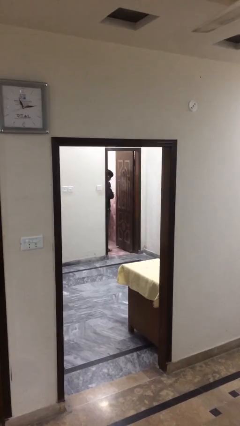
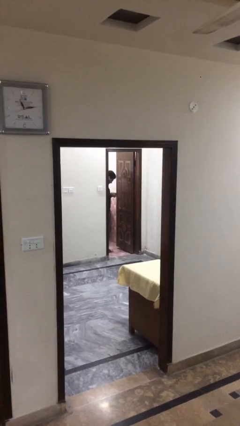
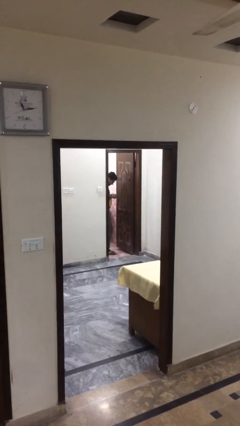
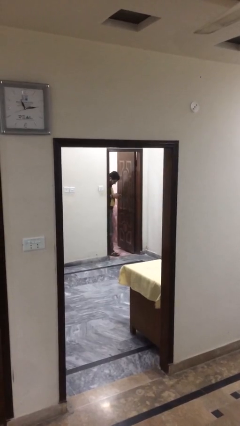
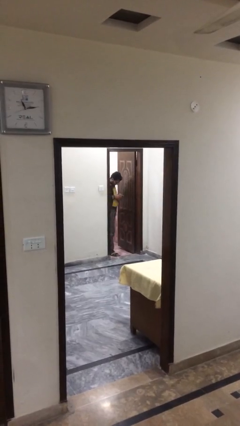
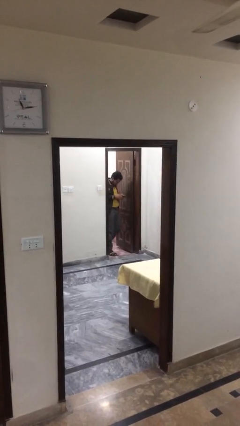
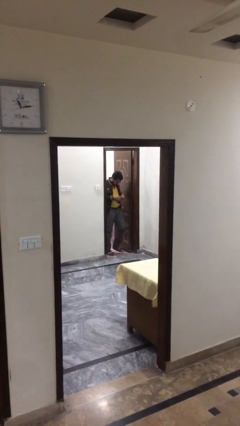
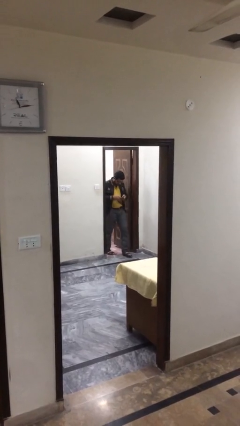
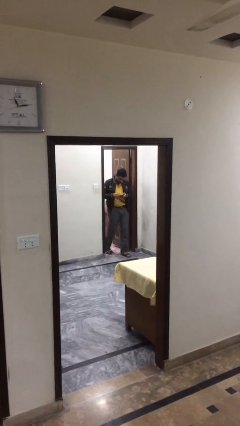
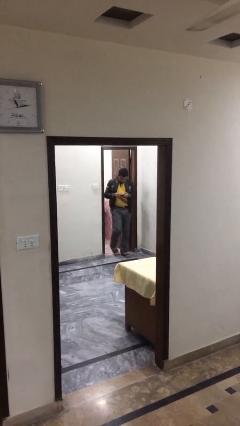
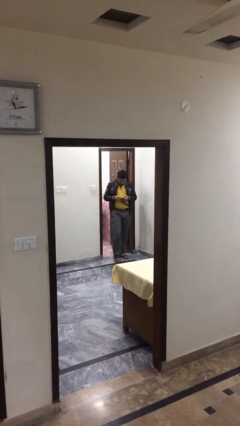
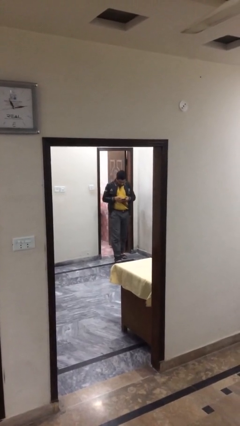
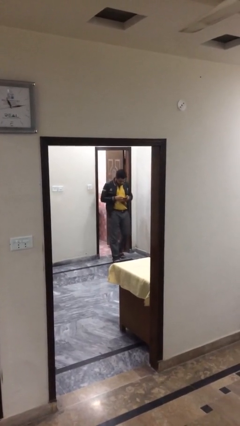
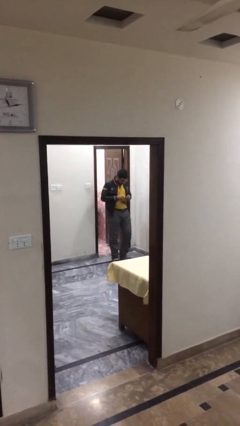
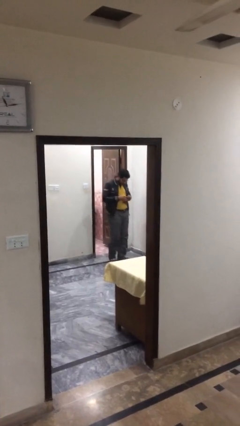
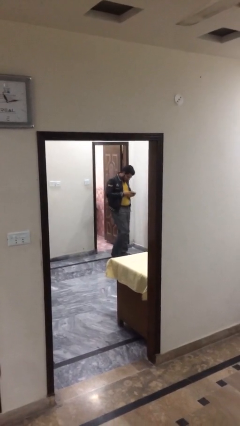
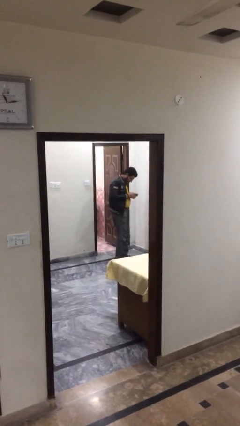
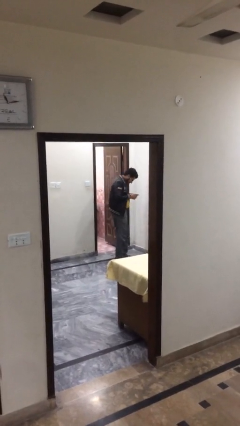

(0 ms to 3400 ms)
person exits scene through structure

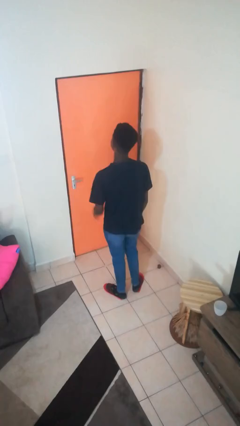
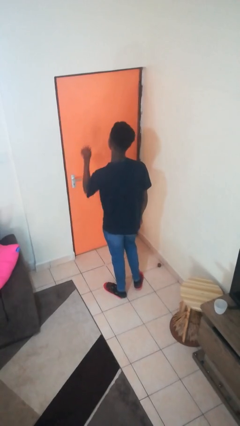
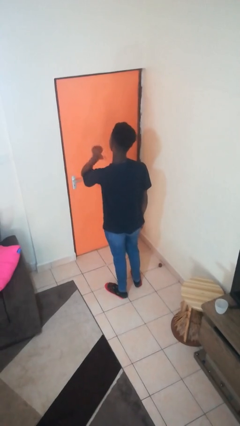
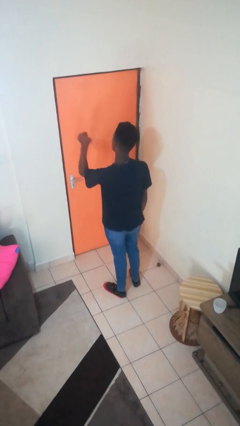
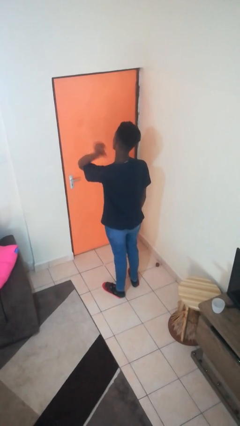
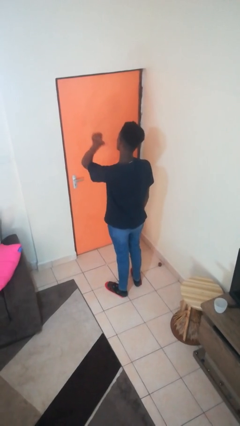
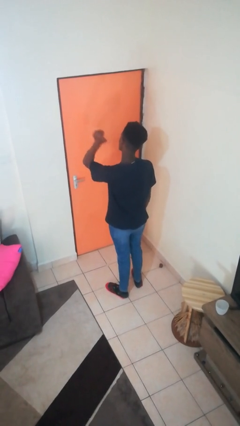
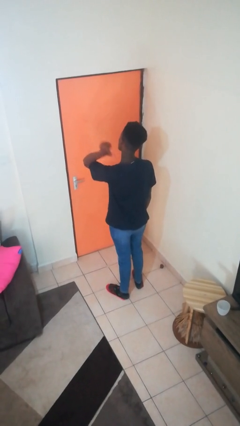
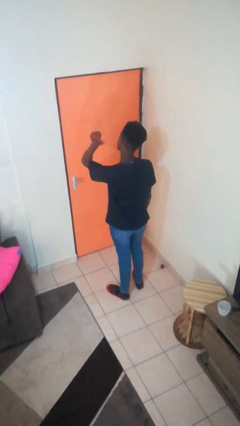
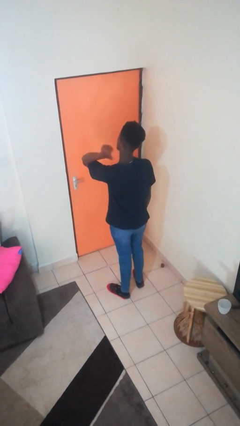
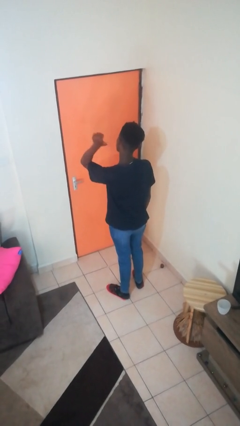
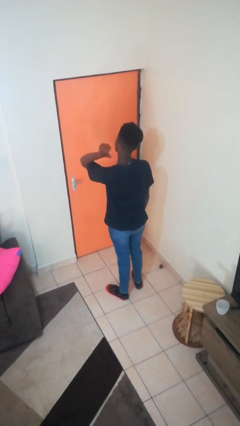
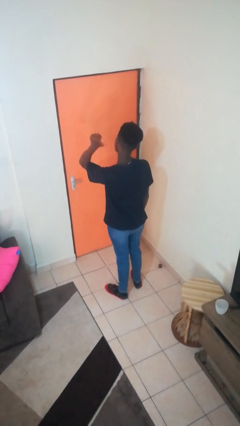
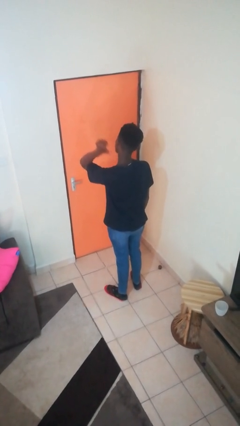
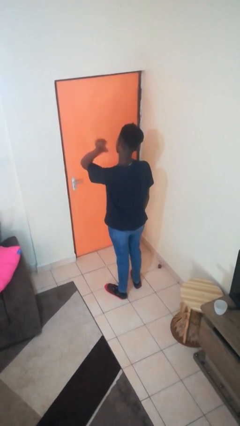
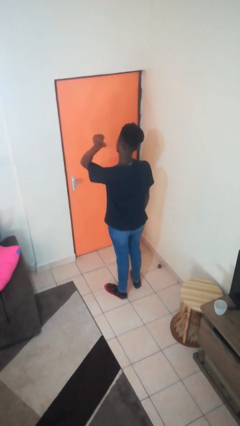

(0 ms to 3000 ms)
person gestures behind me

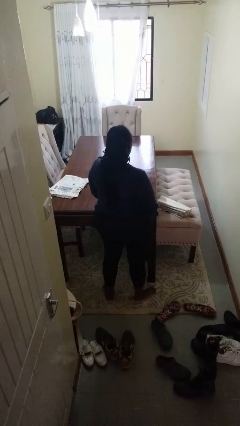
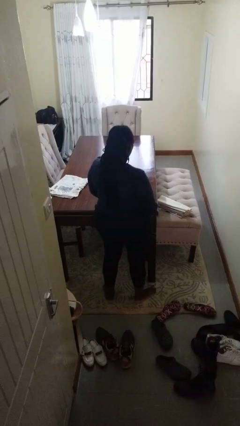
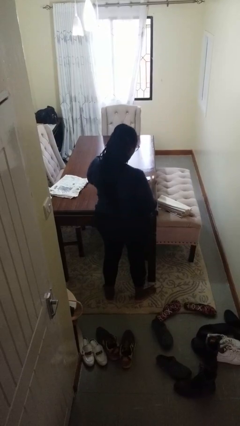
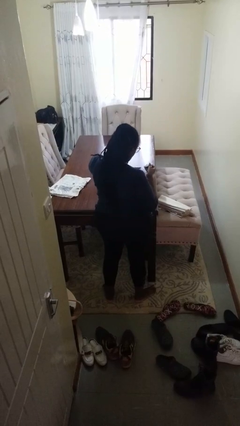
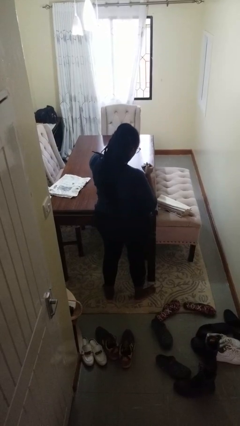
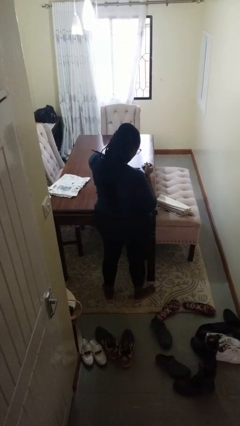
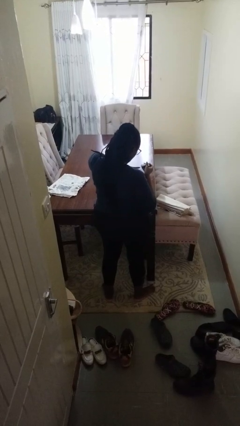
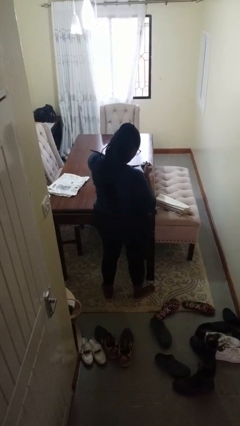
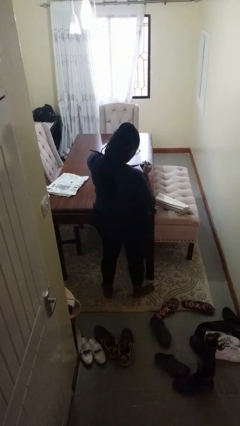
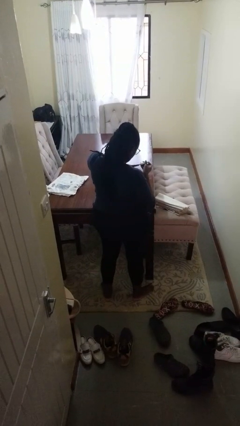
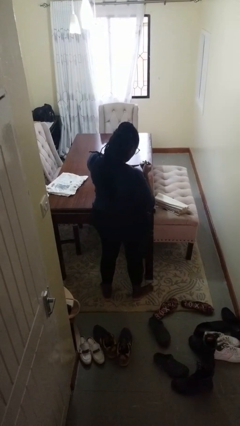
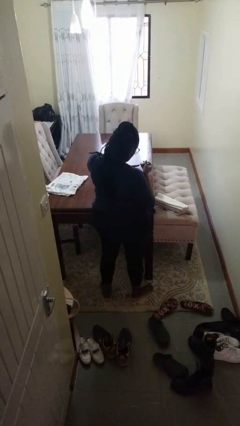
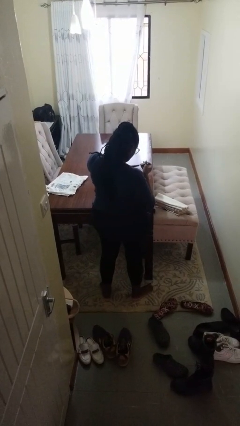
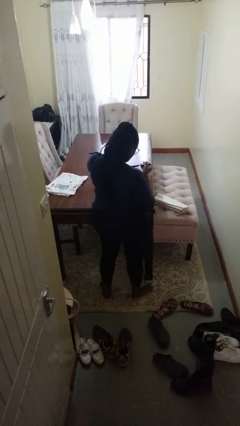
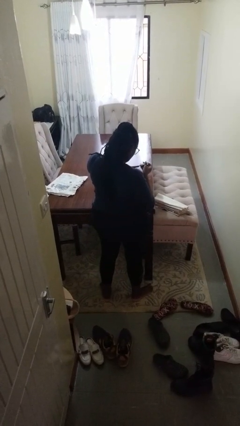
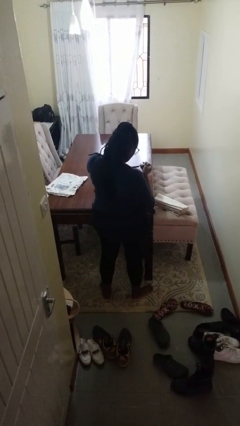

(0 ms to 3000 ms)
person clips fingernails

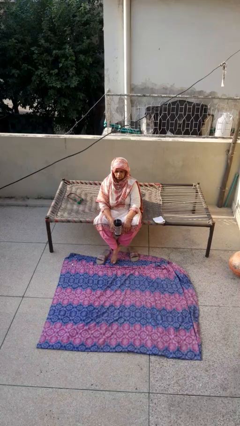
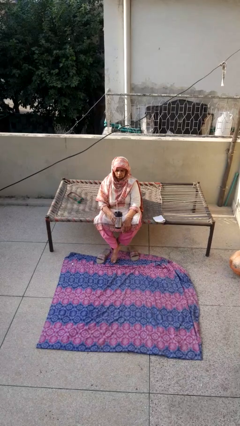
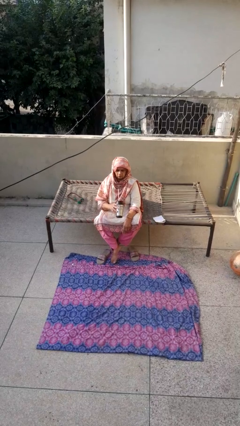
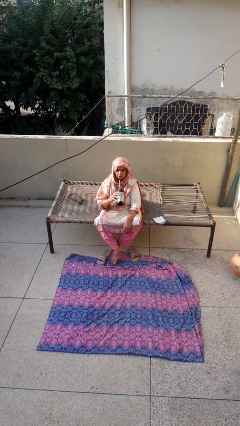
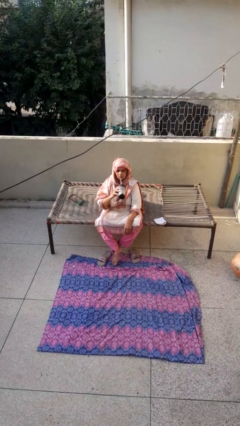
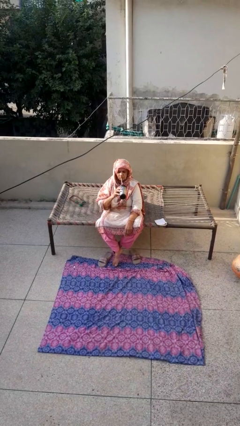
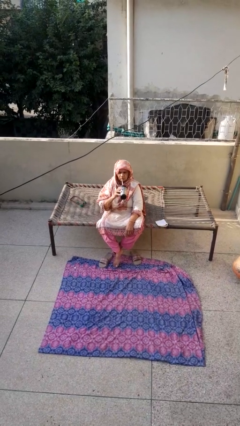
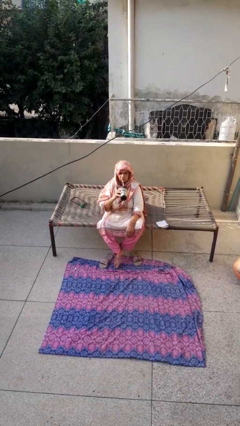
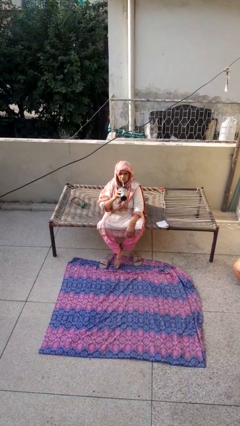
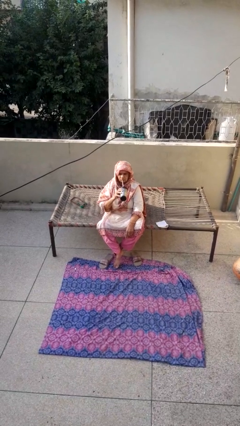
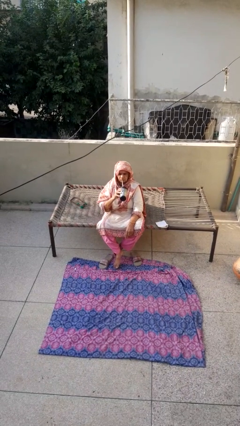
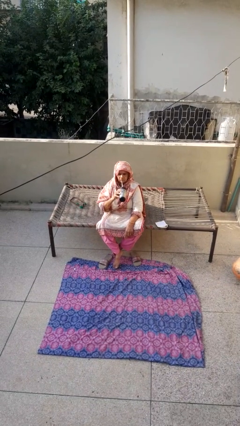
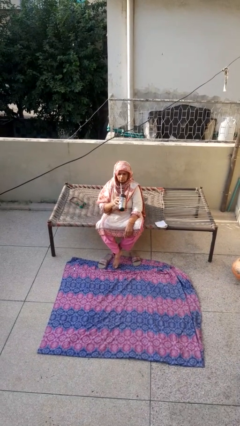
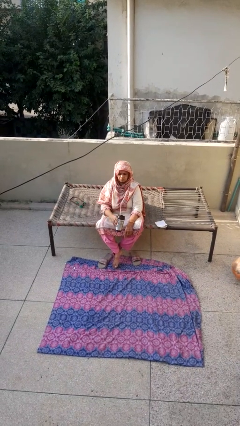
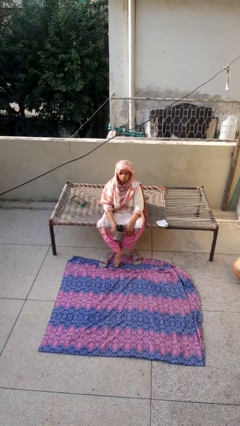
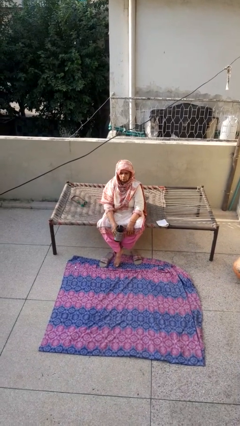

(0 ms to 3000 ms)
person drinks from straw

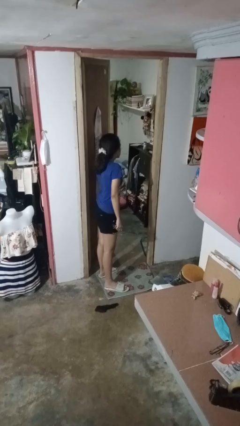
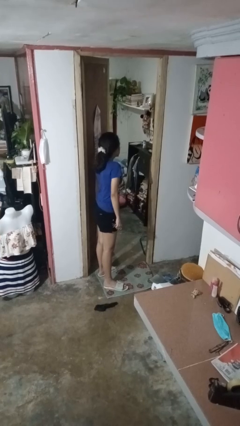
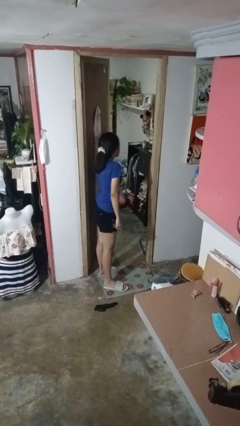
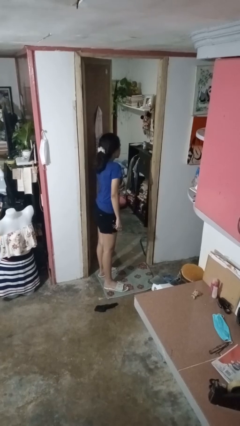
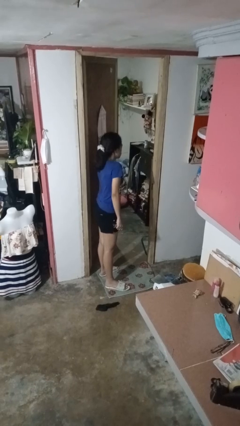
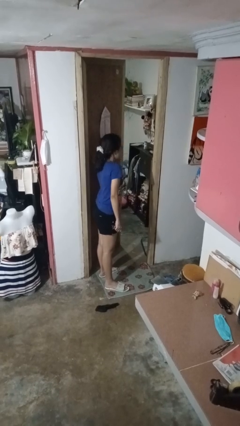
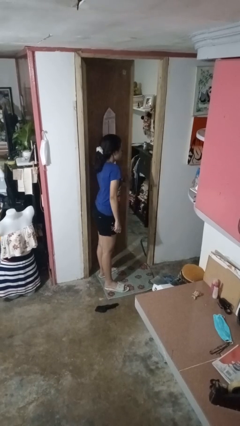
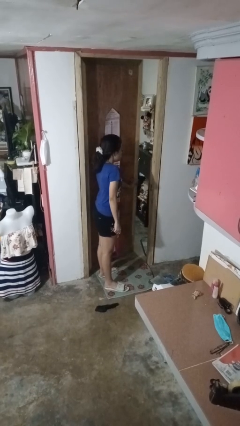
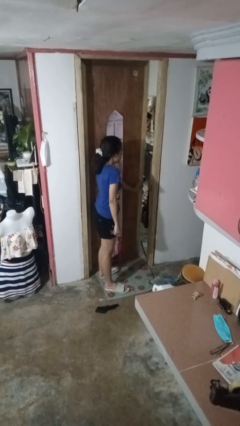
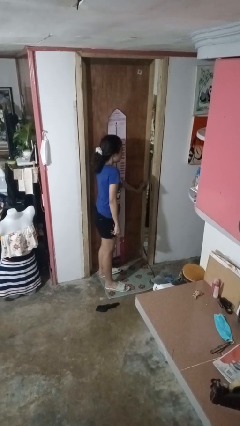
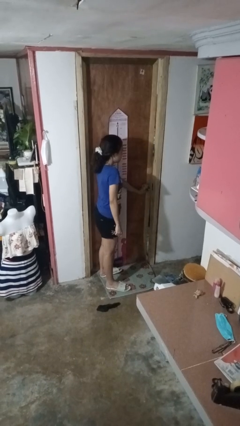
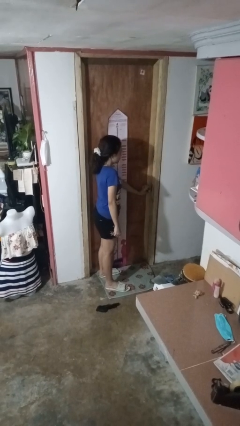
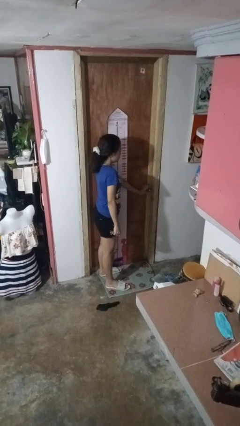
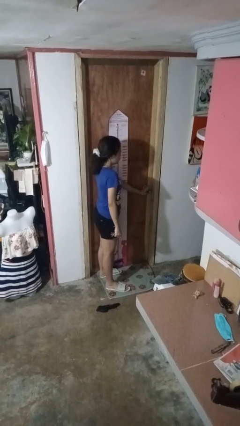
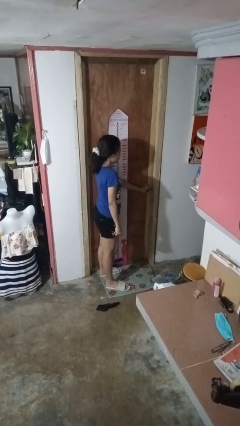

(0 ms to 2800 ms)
person closes facility door

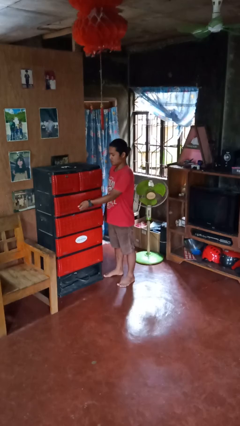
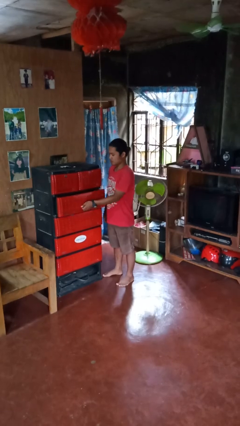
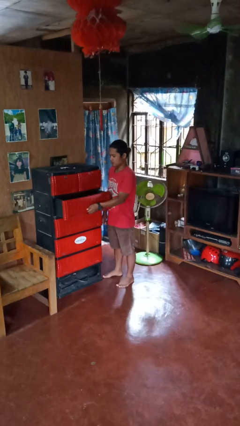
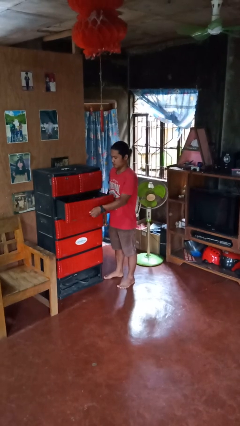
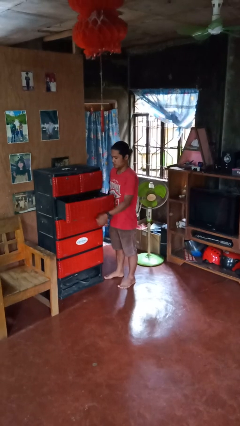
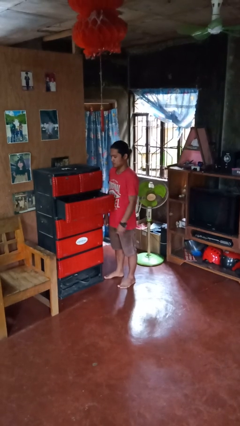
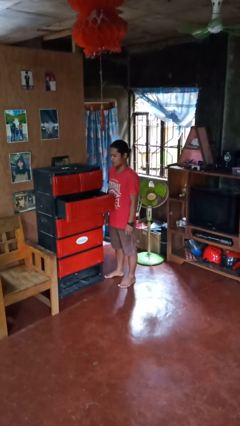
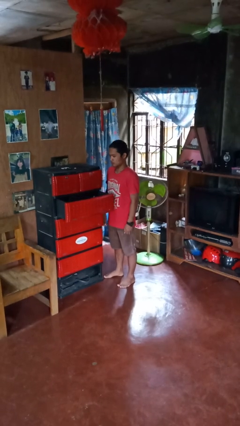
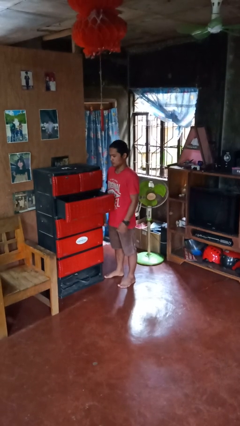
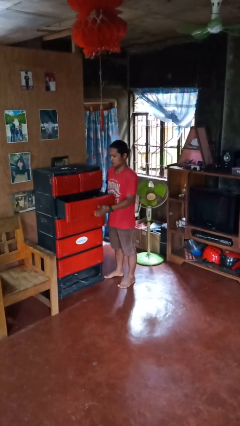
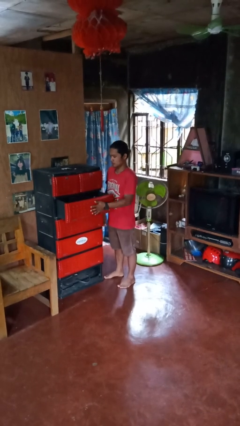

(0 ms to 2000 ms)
person opens dresser drawer
